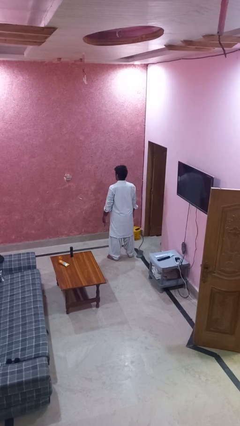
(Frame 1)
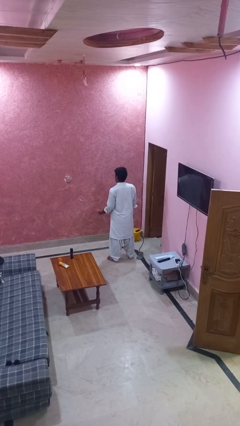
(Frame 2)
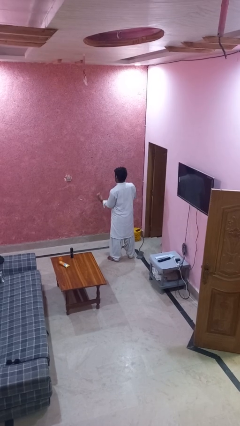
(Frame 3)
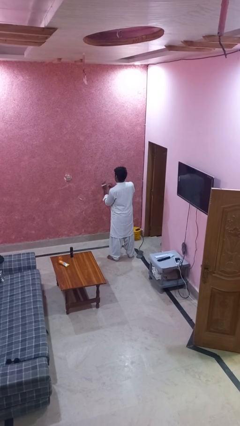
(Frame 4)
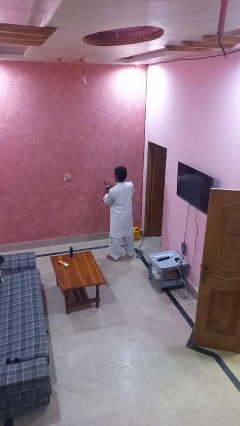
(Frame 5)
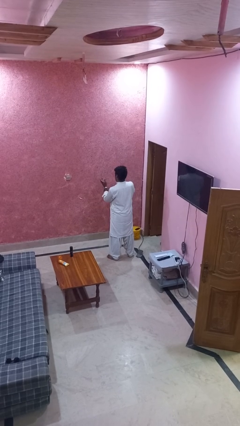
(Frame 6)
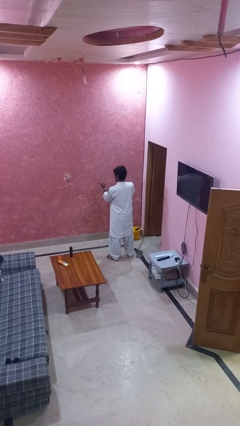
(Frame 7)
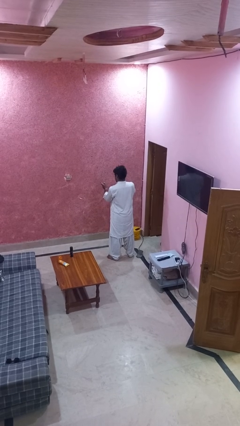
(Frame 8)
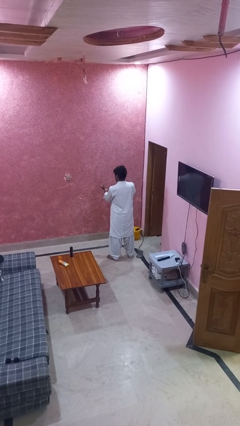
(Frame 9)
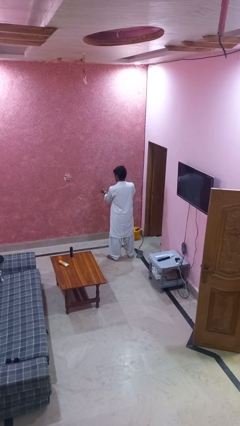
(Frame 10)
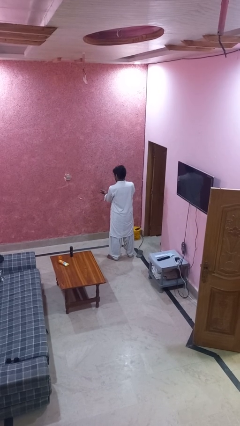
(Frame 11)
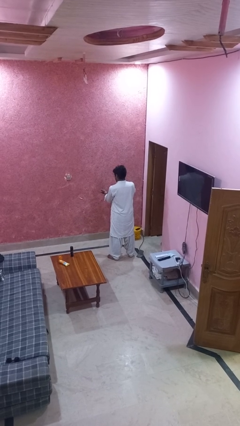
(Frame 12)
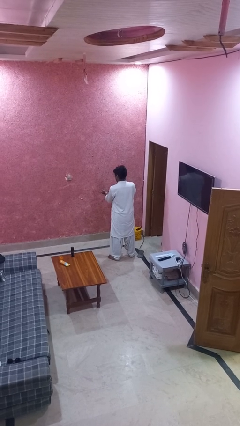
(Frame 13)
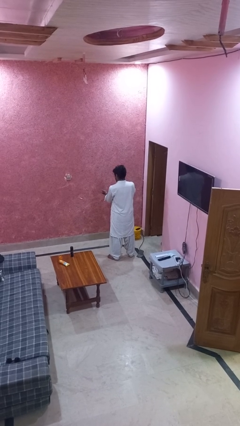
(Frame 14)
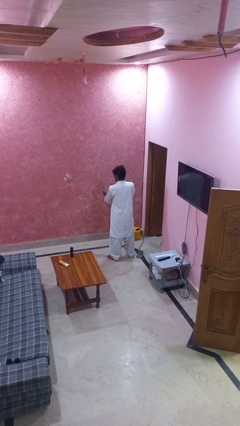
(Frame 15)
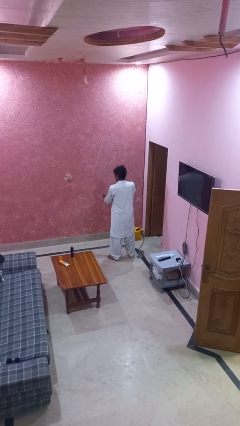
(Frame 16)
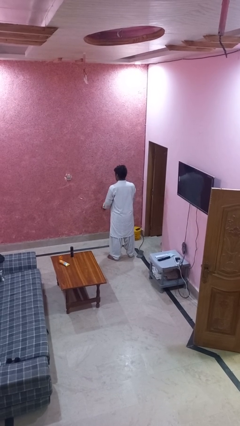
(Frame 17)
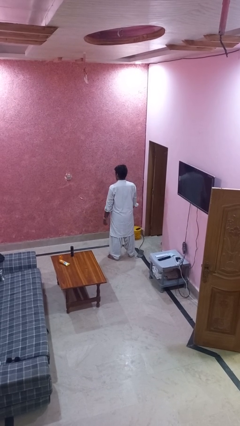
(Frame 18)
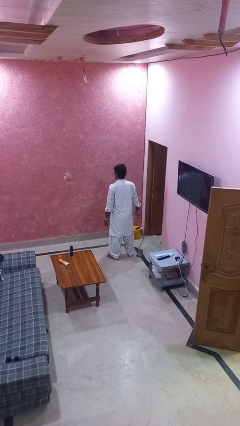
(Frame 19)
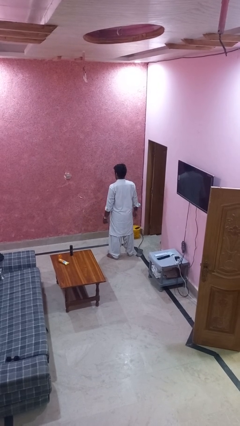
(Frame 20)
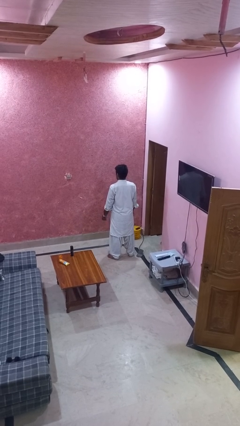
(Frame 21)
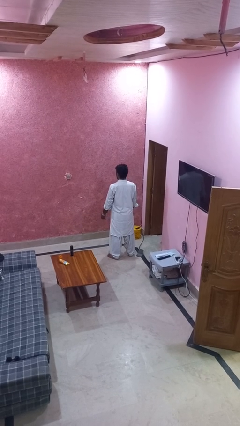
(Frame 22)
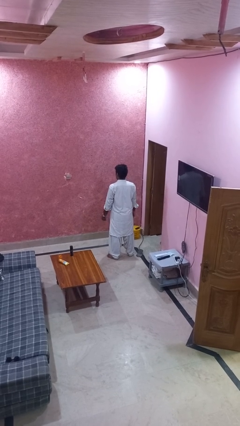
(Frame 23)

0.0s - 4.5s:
person puts on wristwatch

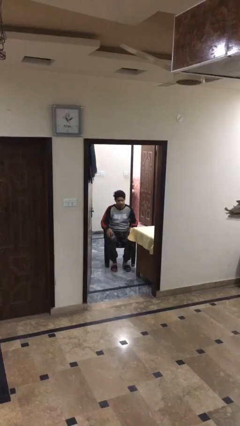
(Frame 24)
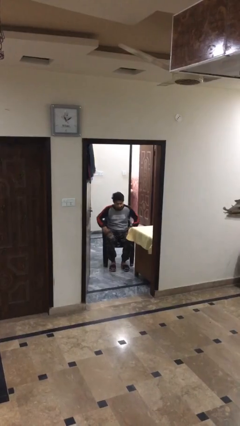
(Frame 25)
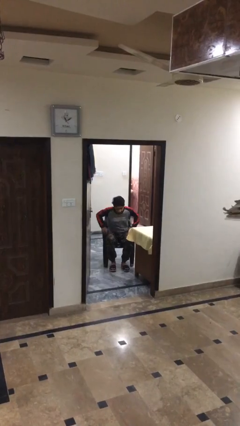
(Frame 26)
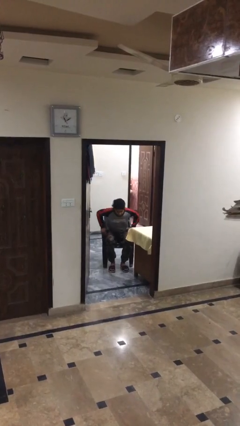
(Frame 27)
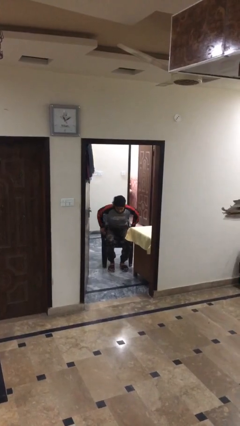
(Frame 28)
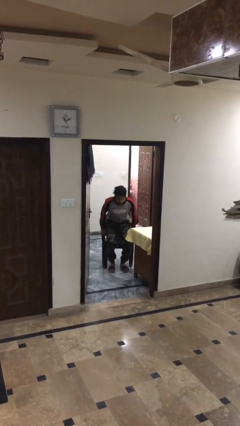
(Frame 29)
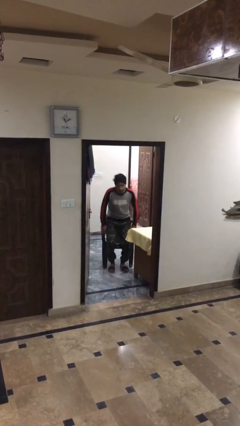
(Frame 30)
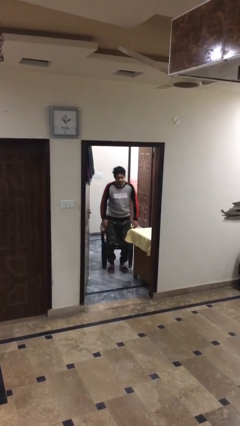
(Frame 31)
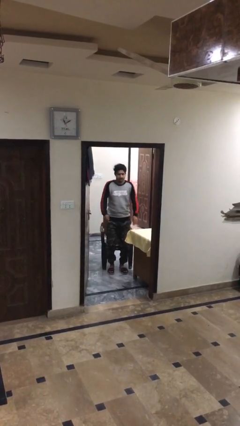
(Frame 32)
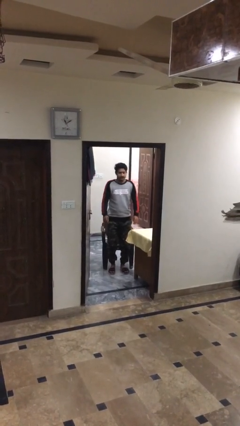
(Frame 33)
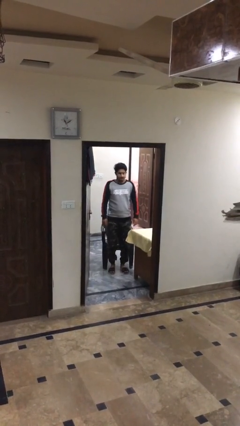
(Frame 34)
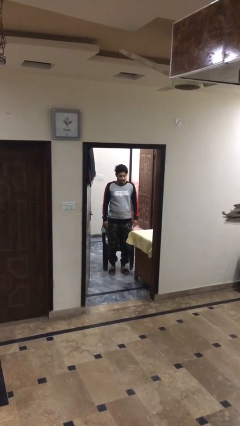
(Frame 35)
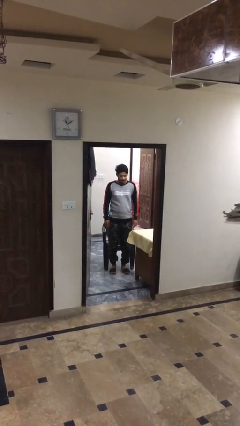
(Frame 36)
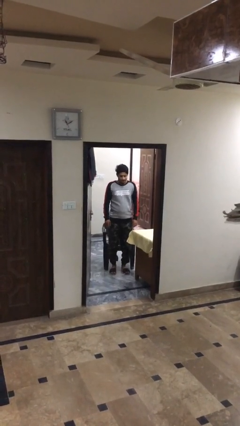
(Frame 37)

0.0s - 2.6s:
person stands up

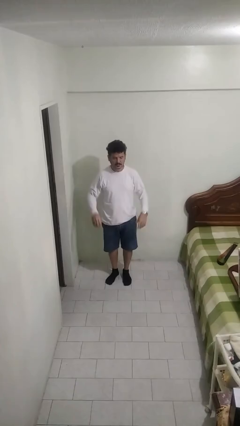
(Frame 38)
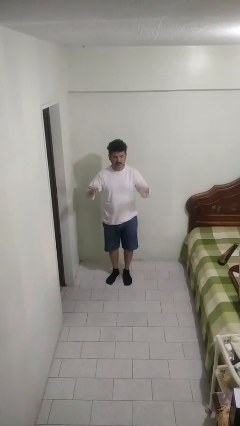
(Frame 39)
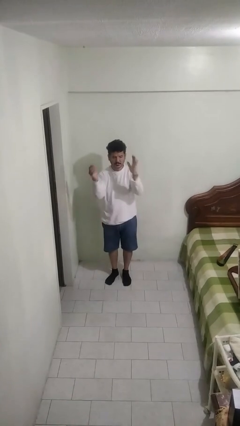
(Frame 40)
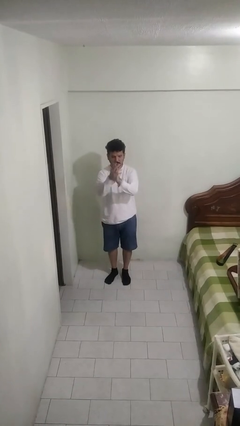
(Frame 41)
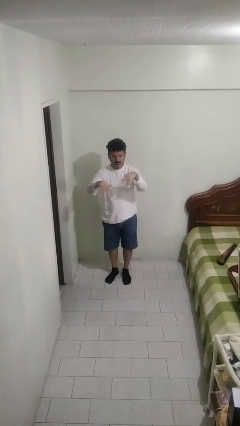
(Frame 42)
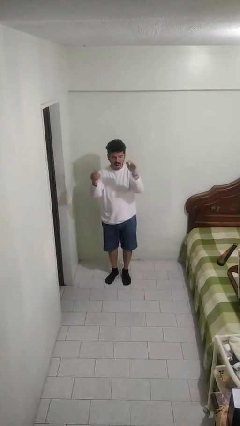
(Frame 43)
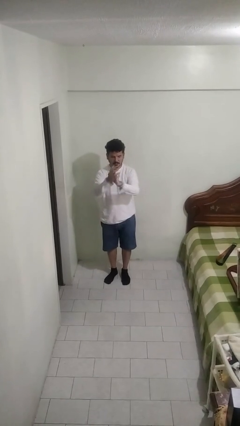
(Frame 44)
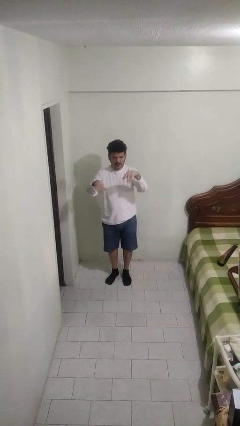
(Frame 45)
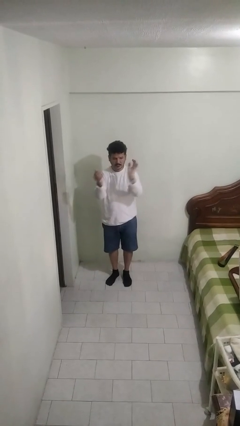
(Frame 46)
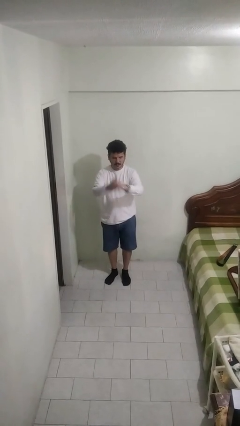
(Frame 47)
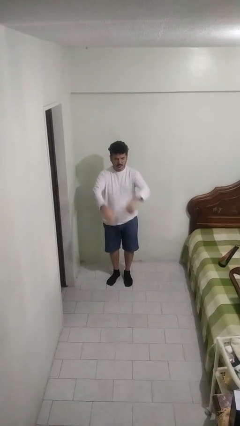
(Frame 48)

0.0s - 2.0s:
person claps hands

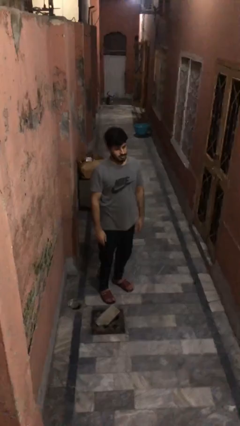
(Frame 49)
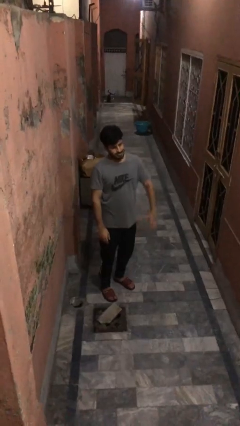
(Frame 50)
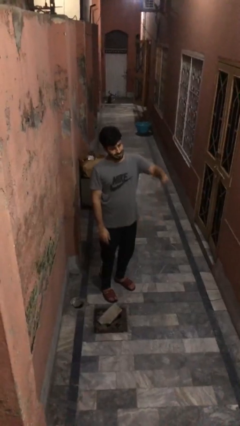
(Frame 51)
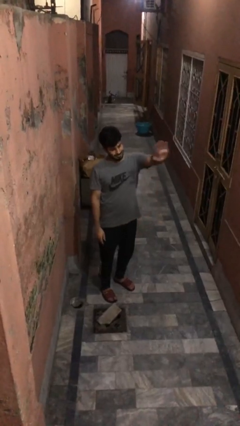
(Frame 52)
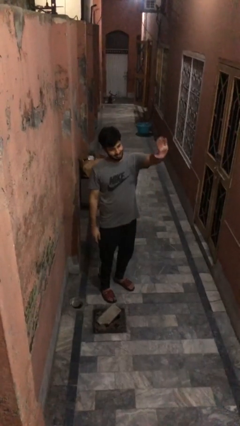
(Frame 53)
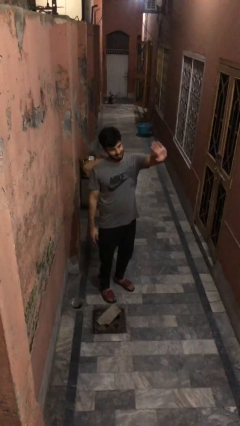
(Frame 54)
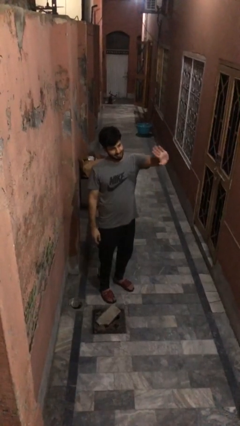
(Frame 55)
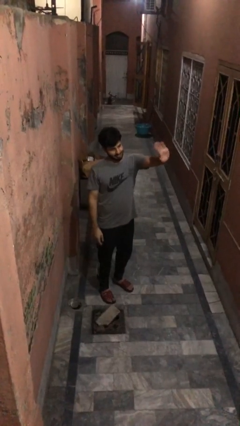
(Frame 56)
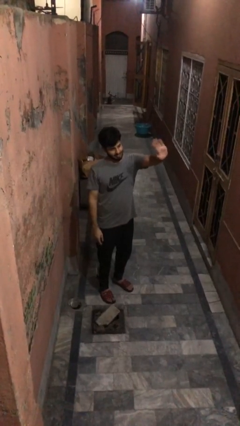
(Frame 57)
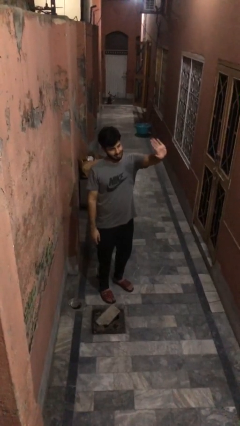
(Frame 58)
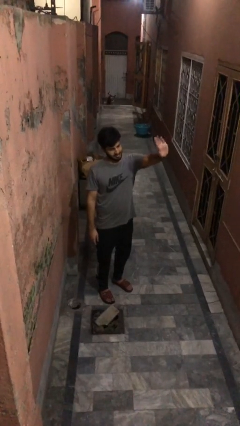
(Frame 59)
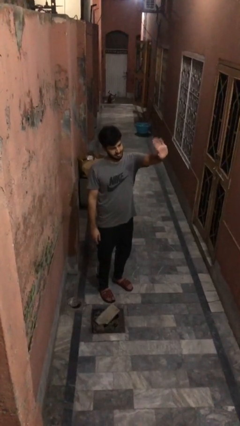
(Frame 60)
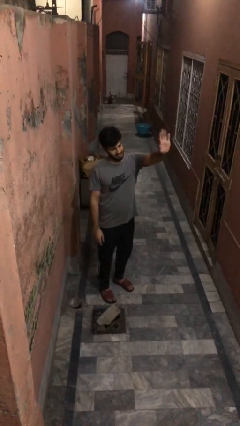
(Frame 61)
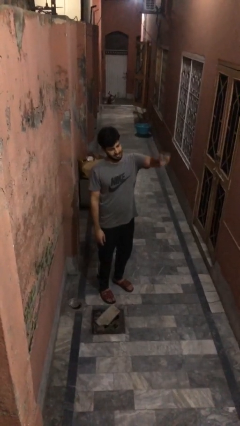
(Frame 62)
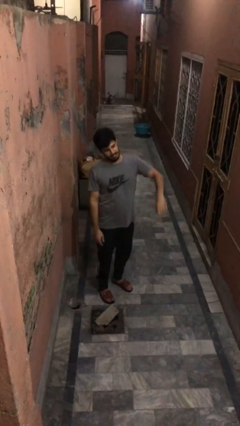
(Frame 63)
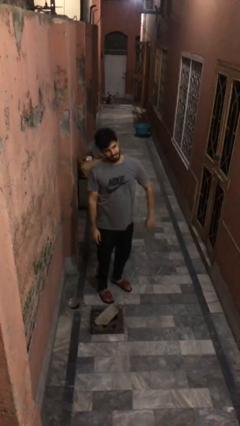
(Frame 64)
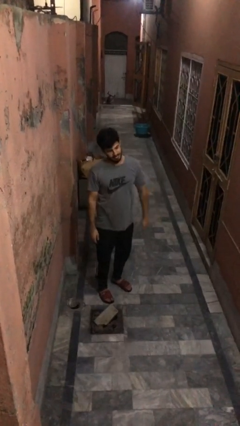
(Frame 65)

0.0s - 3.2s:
person waves at person

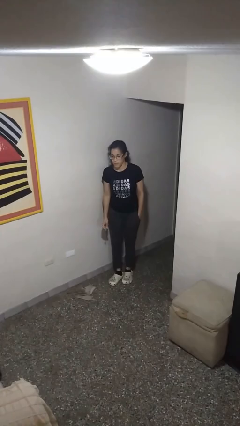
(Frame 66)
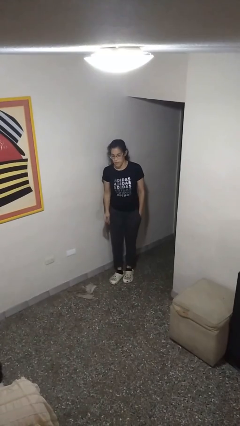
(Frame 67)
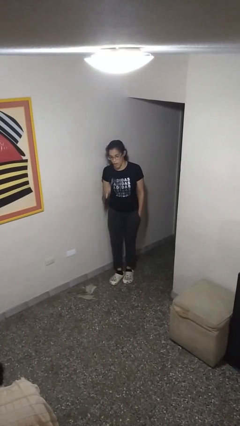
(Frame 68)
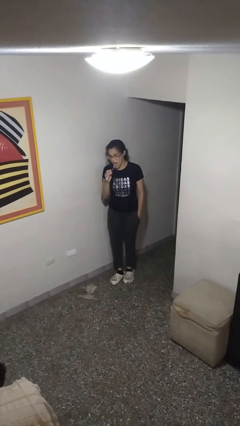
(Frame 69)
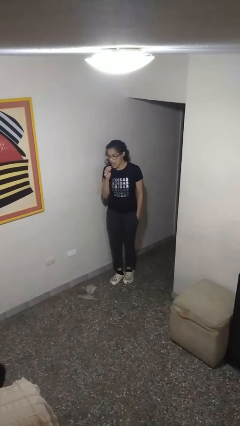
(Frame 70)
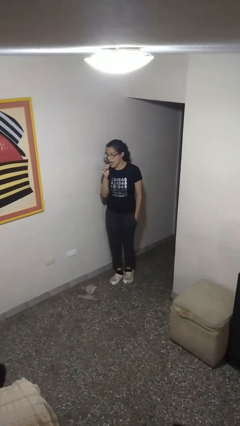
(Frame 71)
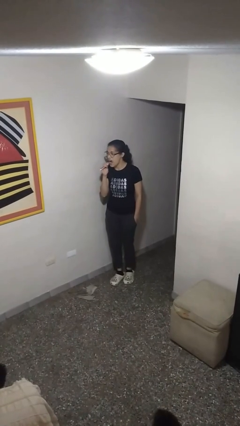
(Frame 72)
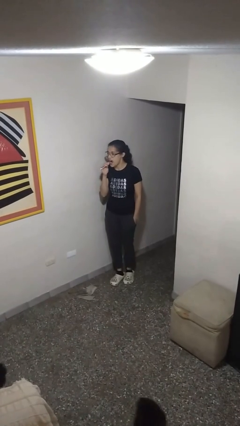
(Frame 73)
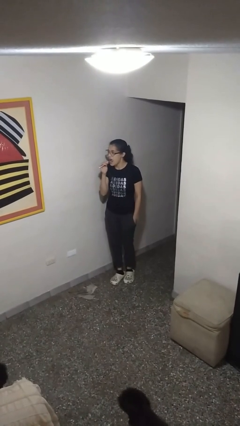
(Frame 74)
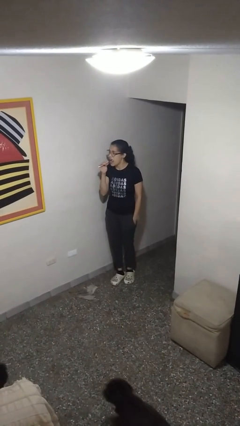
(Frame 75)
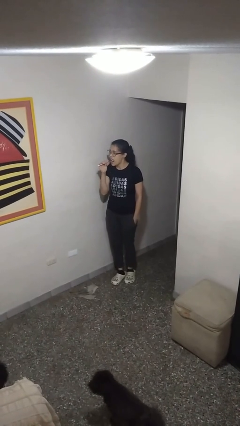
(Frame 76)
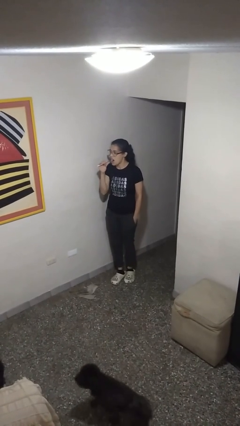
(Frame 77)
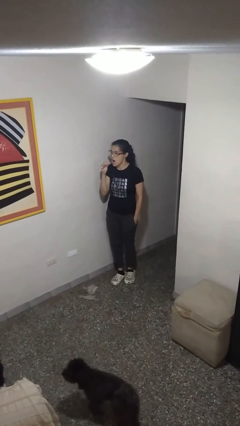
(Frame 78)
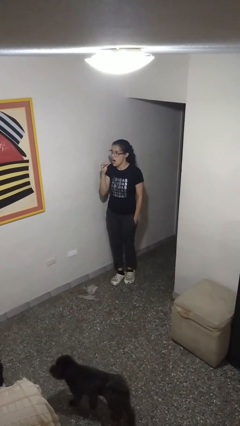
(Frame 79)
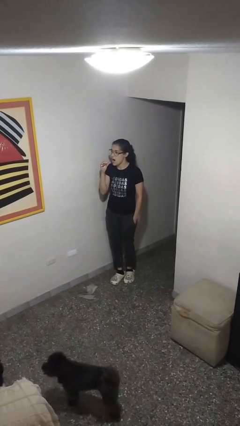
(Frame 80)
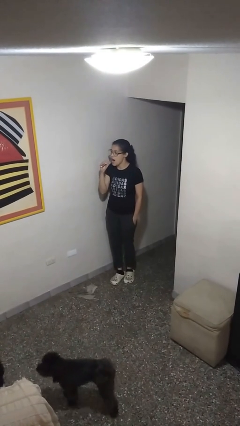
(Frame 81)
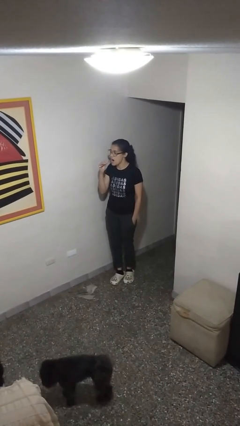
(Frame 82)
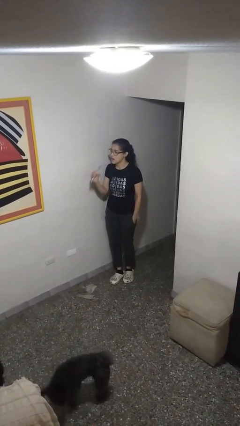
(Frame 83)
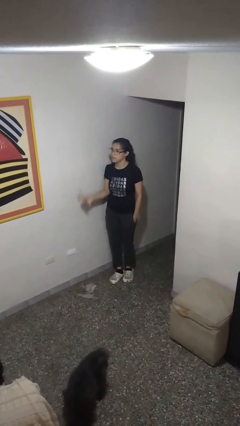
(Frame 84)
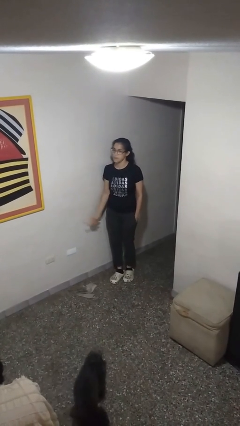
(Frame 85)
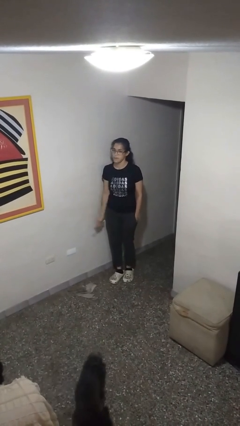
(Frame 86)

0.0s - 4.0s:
person brushes teeth

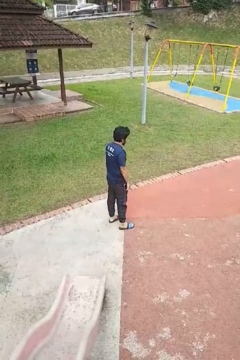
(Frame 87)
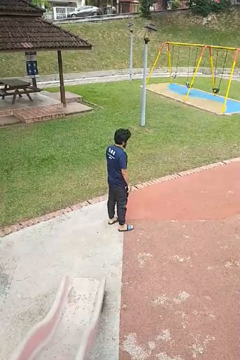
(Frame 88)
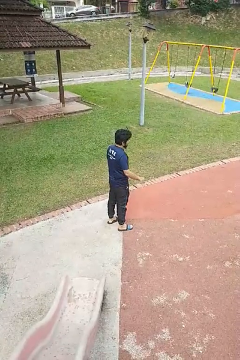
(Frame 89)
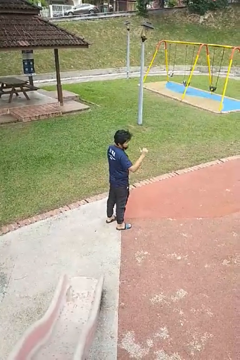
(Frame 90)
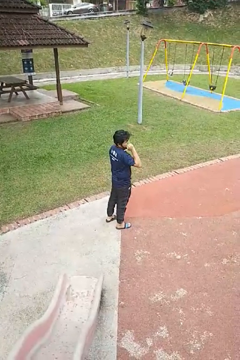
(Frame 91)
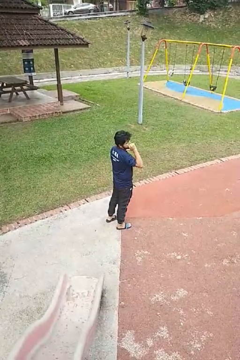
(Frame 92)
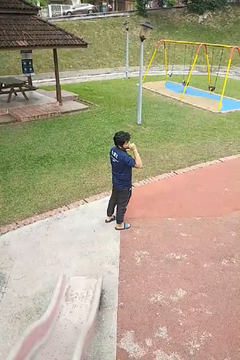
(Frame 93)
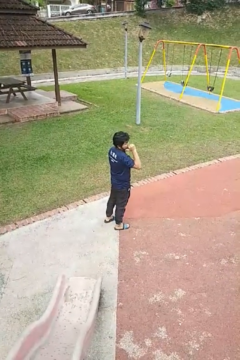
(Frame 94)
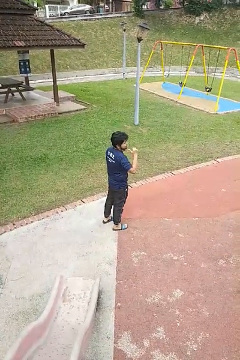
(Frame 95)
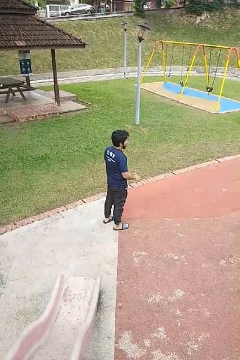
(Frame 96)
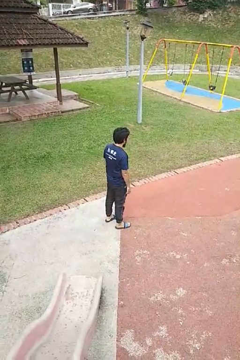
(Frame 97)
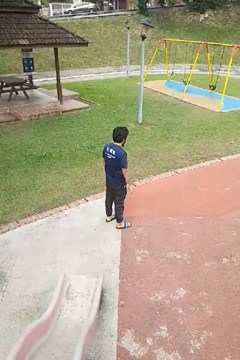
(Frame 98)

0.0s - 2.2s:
person gestures behind me
